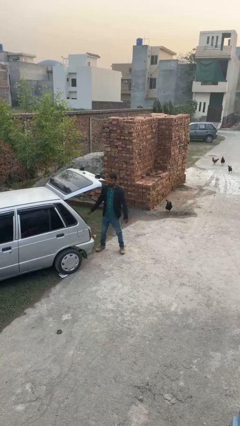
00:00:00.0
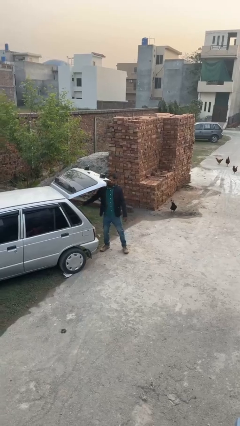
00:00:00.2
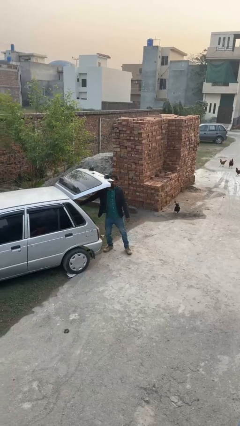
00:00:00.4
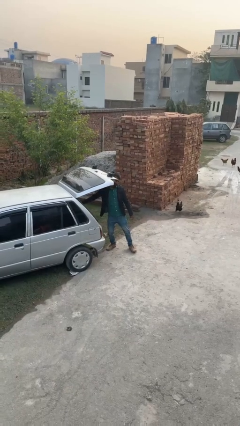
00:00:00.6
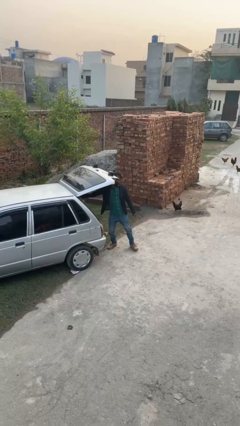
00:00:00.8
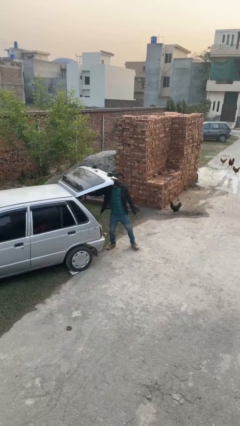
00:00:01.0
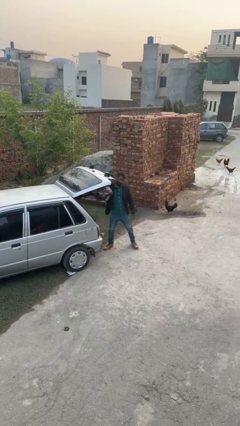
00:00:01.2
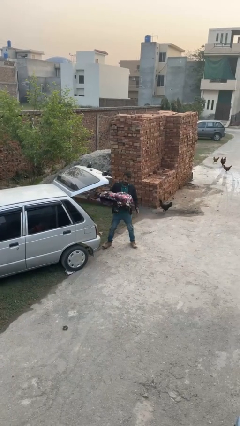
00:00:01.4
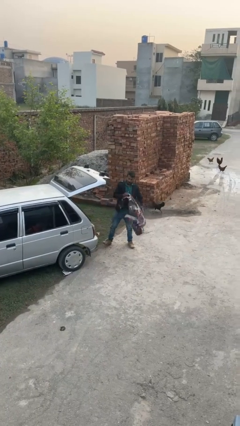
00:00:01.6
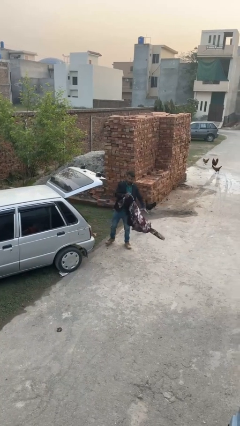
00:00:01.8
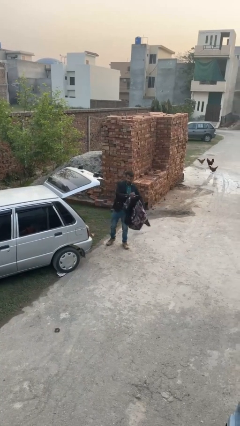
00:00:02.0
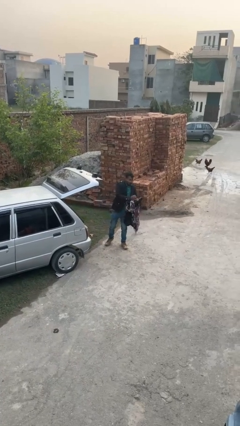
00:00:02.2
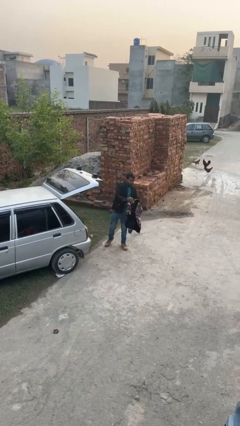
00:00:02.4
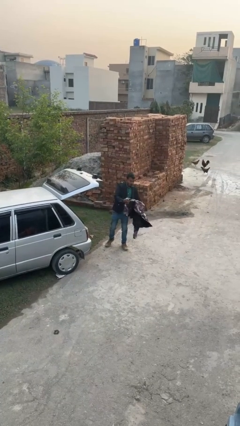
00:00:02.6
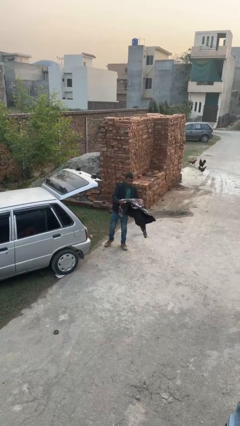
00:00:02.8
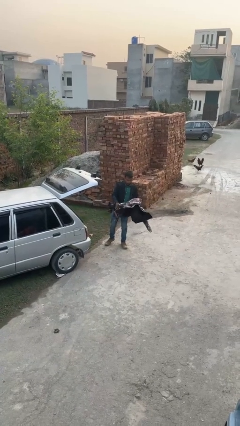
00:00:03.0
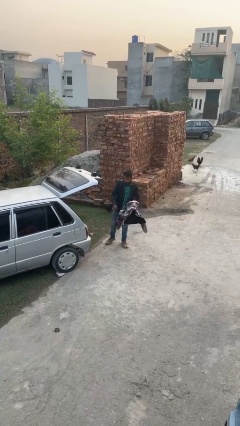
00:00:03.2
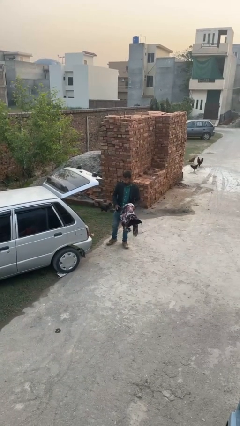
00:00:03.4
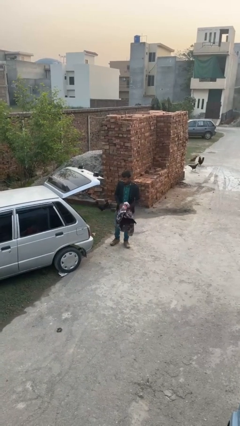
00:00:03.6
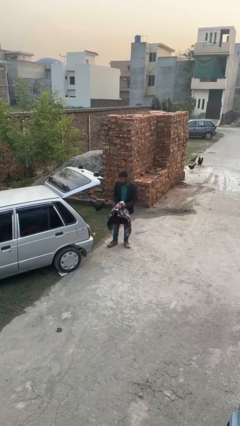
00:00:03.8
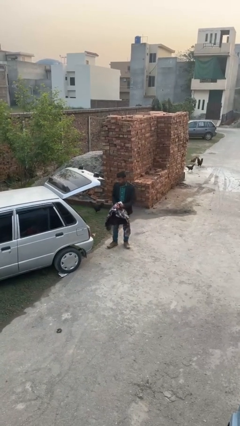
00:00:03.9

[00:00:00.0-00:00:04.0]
person unloads car

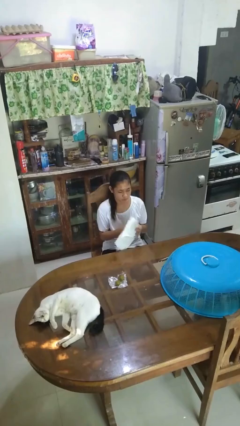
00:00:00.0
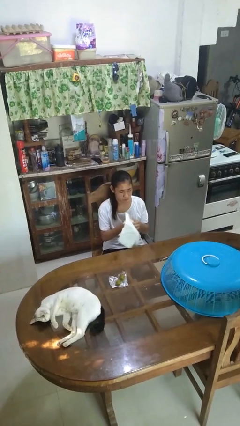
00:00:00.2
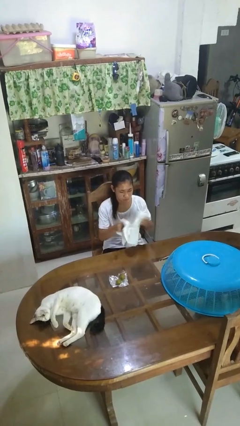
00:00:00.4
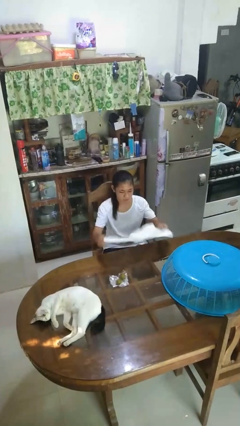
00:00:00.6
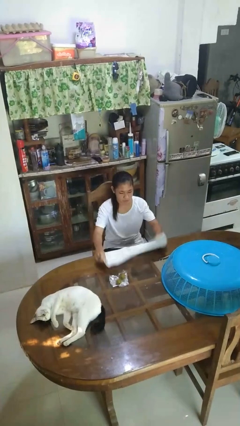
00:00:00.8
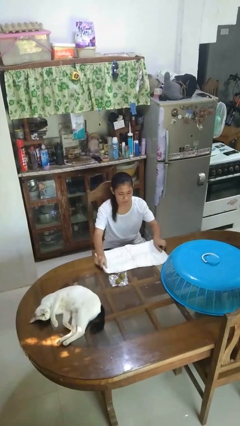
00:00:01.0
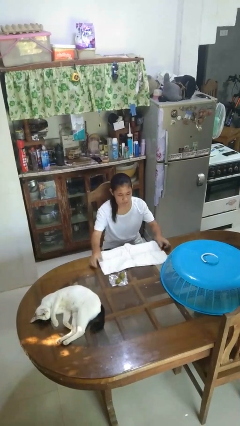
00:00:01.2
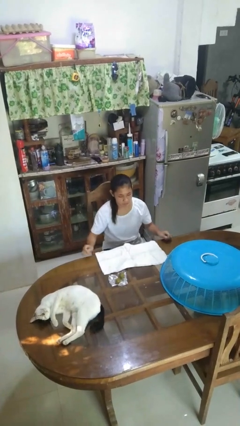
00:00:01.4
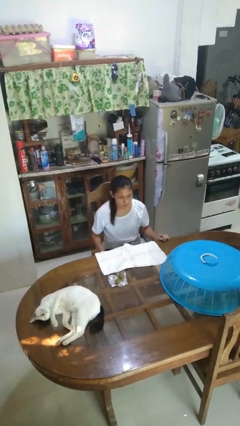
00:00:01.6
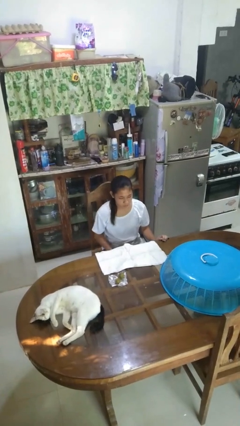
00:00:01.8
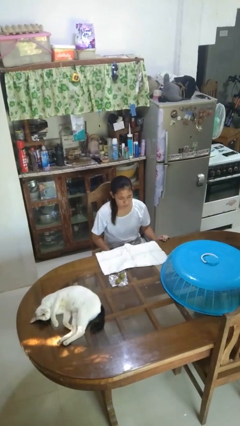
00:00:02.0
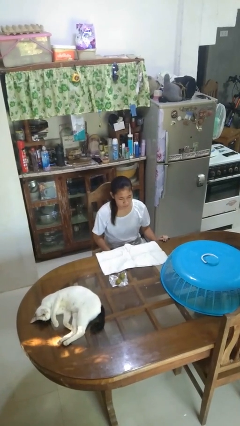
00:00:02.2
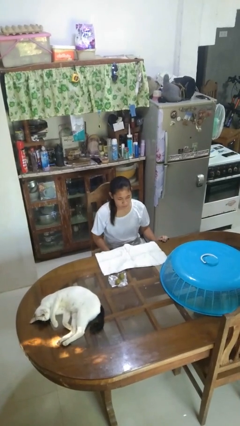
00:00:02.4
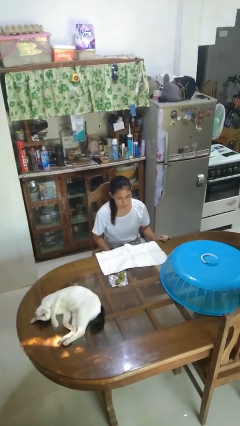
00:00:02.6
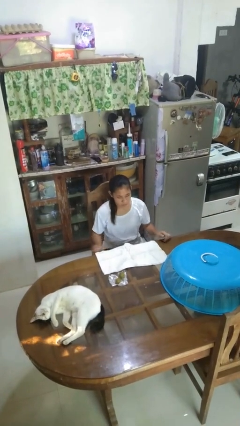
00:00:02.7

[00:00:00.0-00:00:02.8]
person spreads tablecloth

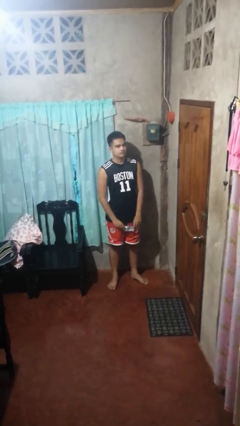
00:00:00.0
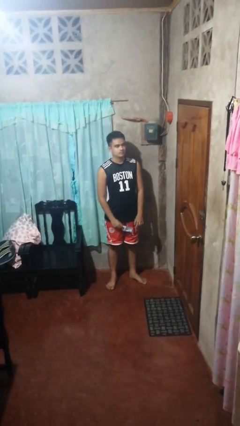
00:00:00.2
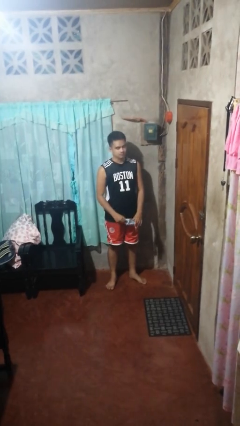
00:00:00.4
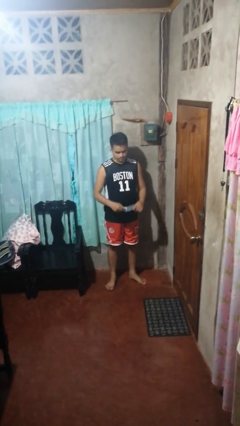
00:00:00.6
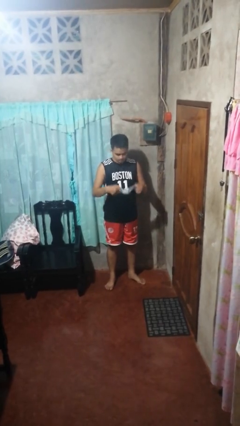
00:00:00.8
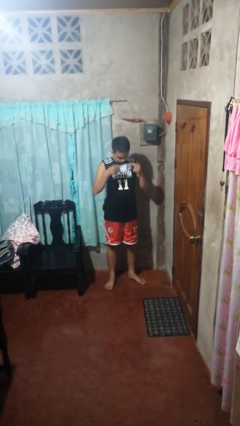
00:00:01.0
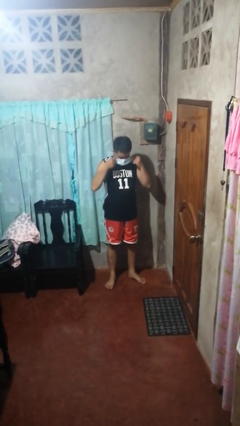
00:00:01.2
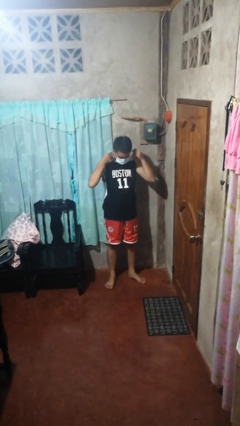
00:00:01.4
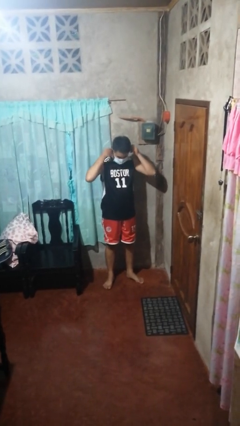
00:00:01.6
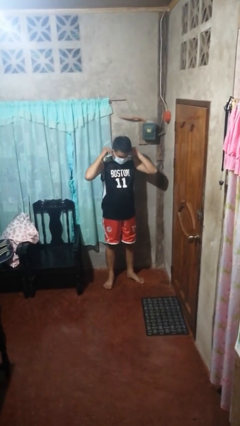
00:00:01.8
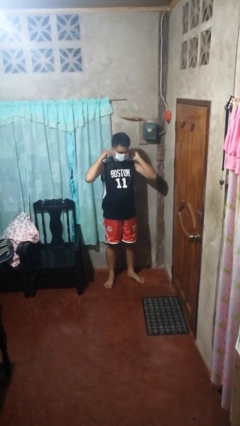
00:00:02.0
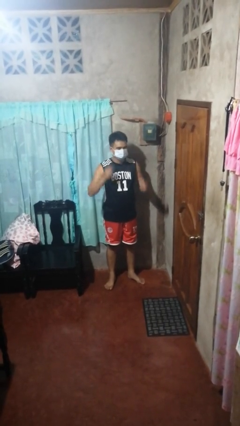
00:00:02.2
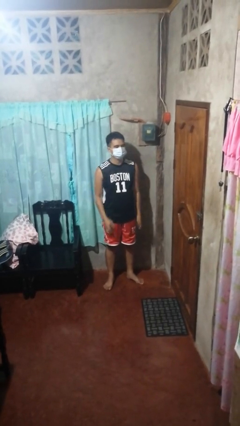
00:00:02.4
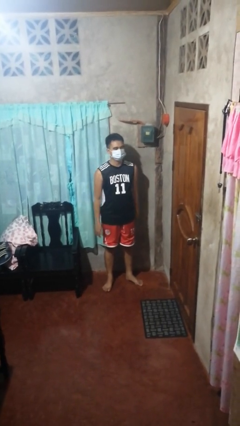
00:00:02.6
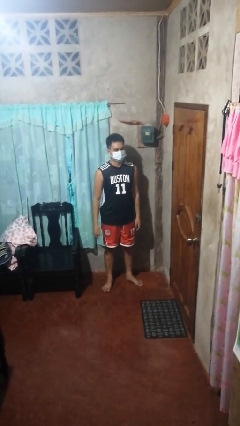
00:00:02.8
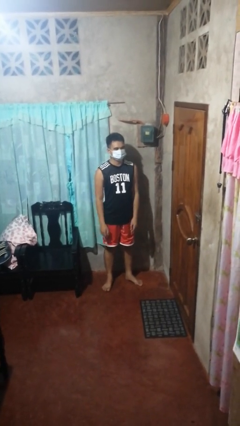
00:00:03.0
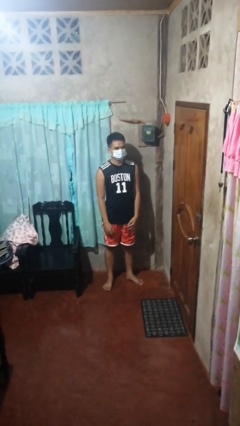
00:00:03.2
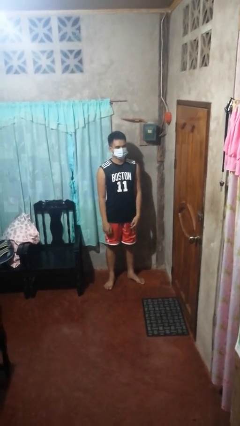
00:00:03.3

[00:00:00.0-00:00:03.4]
person puts on facemask

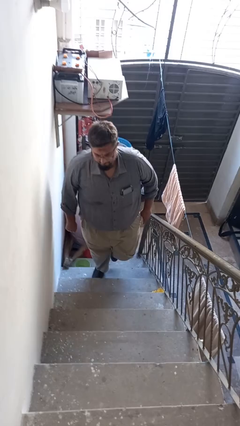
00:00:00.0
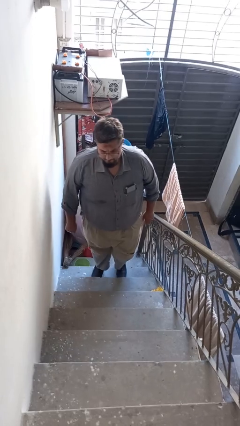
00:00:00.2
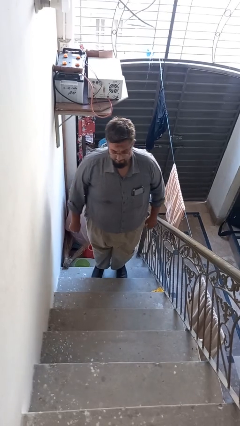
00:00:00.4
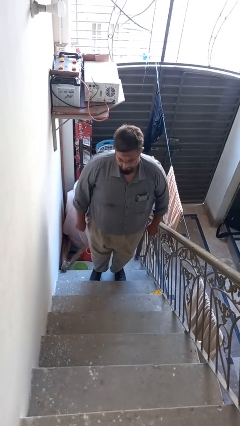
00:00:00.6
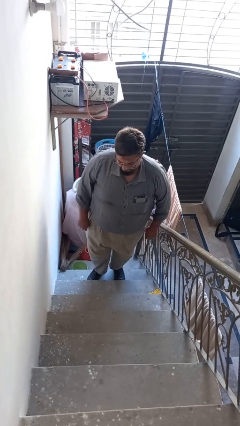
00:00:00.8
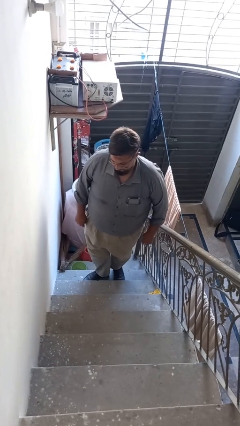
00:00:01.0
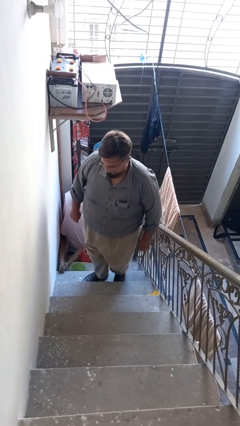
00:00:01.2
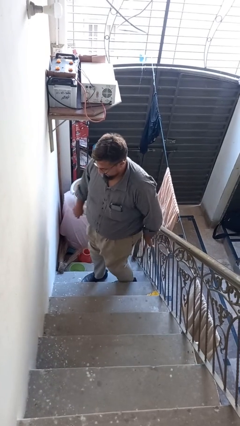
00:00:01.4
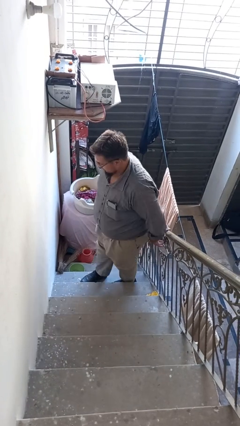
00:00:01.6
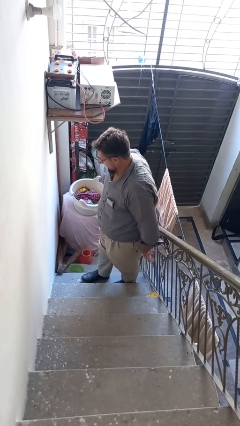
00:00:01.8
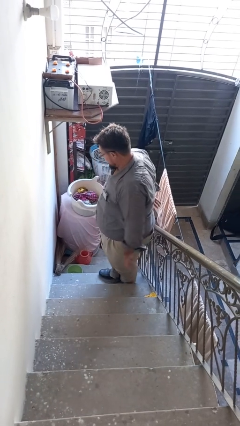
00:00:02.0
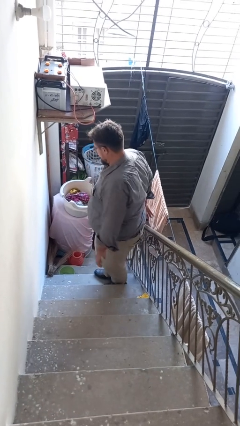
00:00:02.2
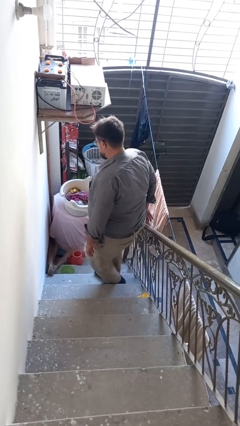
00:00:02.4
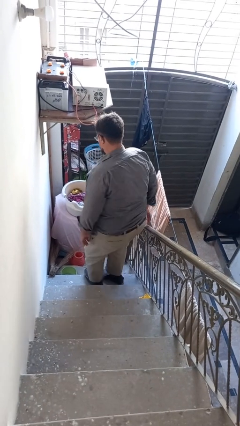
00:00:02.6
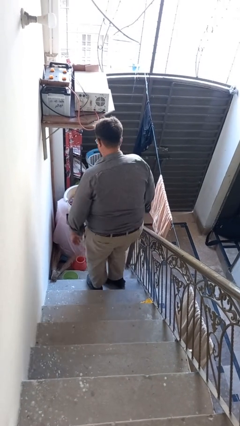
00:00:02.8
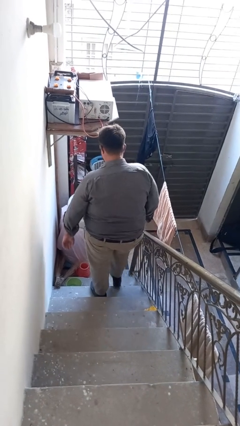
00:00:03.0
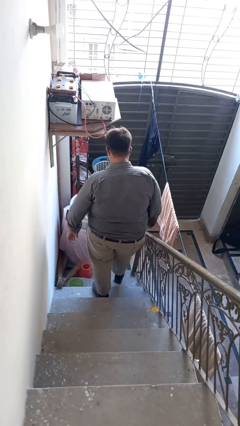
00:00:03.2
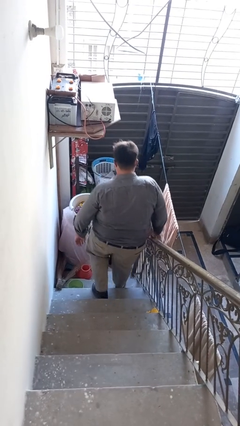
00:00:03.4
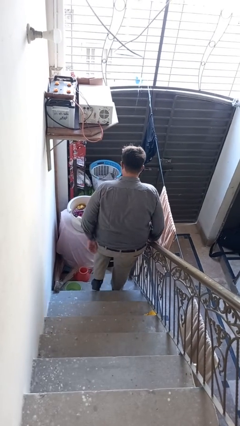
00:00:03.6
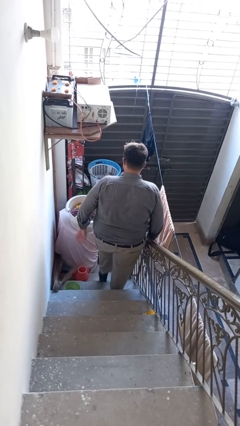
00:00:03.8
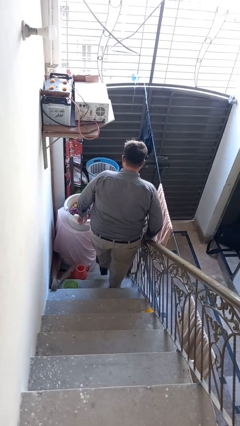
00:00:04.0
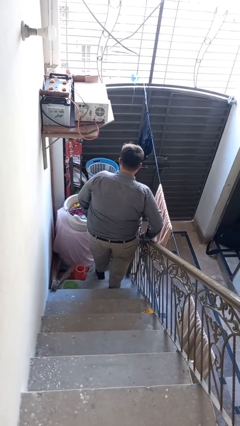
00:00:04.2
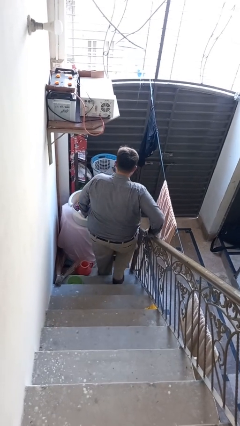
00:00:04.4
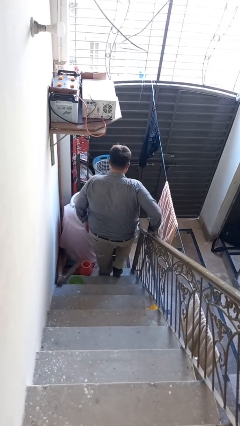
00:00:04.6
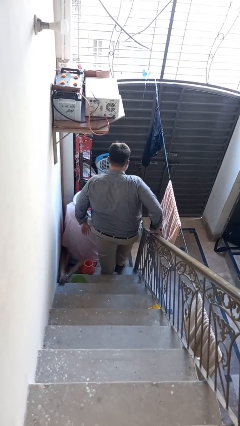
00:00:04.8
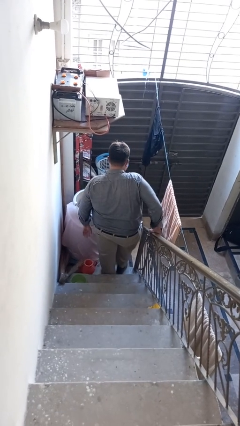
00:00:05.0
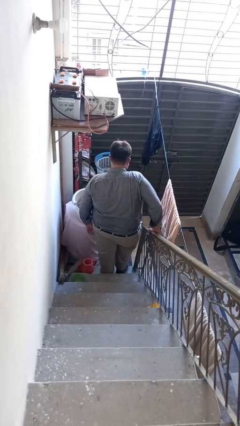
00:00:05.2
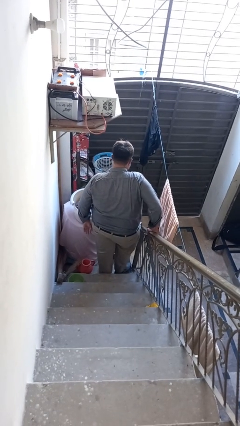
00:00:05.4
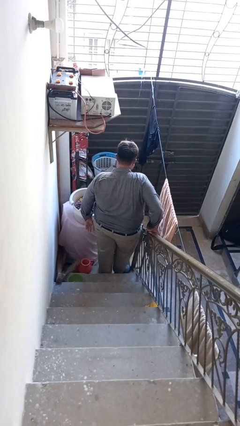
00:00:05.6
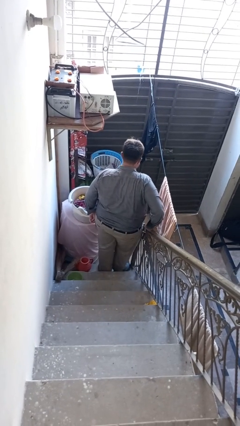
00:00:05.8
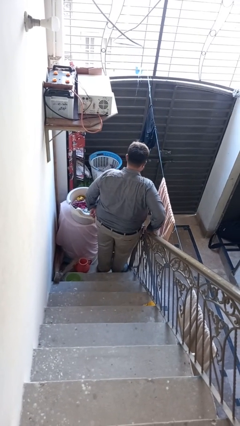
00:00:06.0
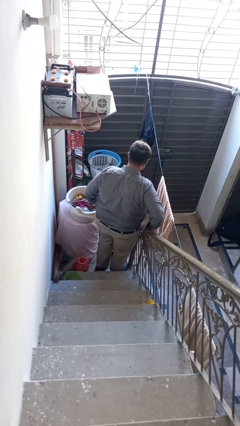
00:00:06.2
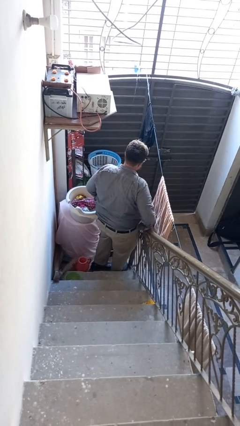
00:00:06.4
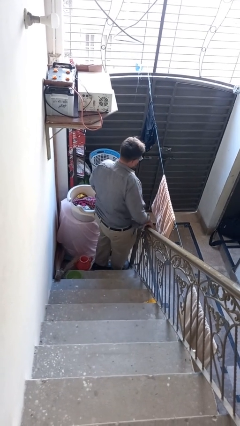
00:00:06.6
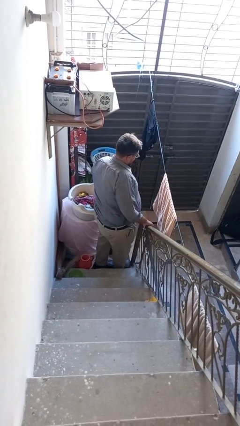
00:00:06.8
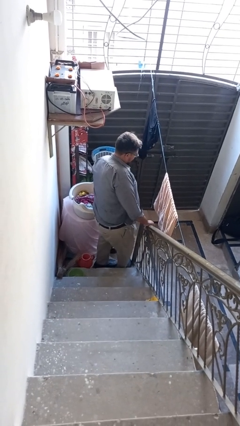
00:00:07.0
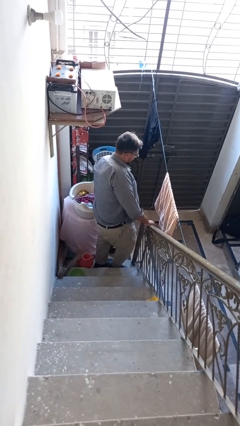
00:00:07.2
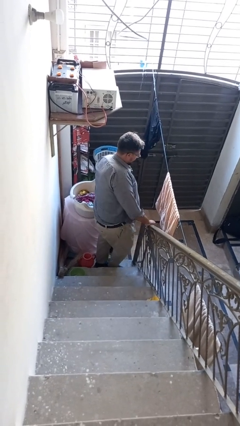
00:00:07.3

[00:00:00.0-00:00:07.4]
person climbs down stairs
